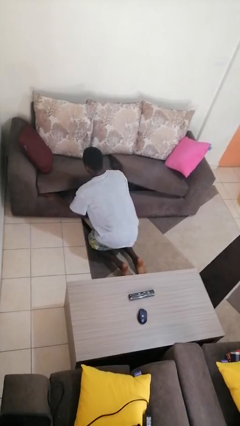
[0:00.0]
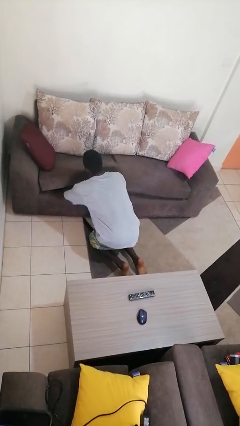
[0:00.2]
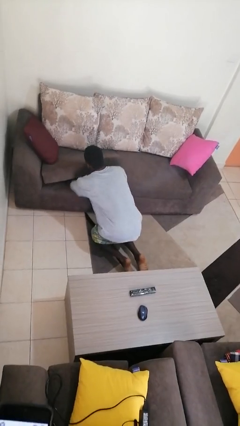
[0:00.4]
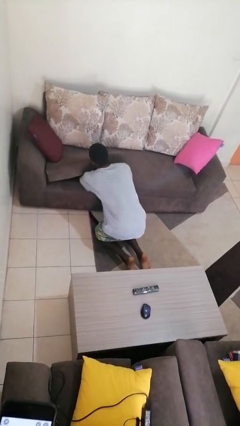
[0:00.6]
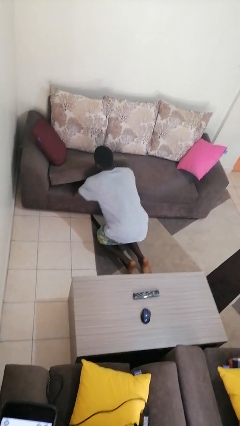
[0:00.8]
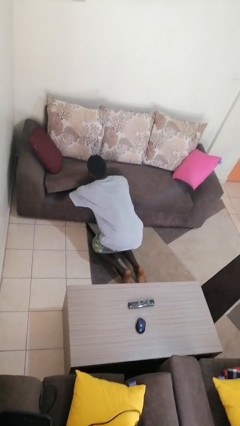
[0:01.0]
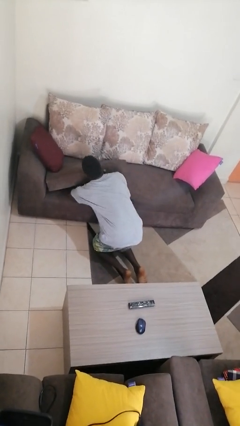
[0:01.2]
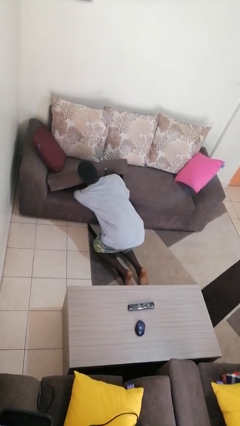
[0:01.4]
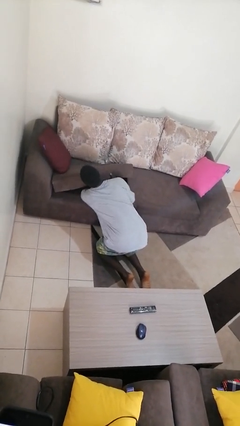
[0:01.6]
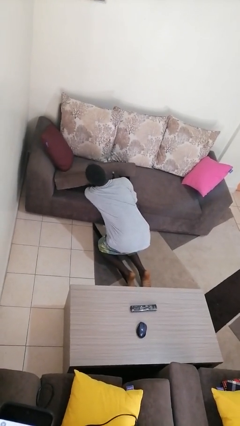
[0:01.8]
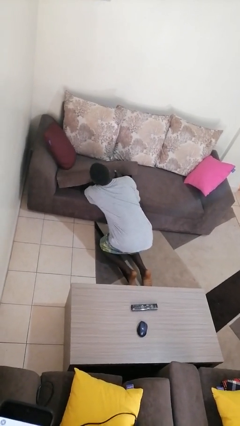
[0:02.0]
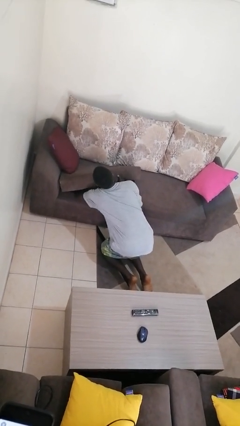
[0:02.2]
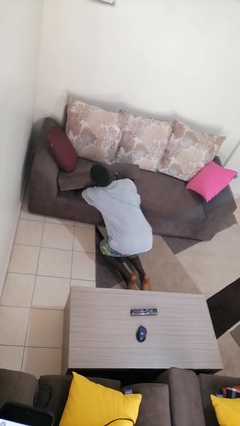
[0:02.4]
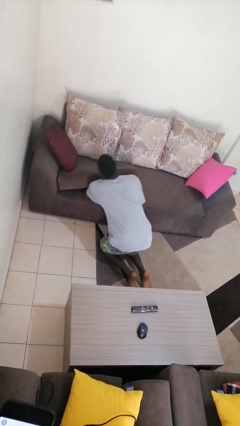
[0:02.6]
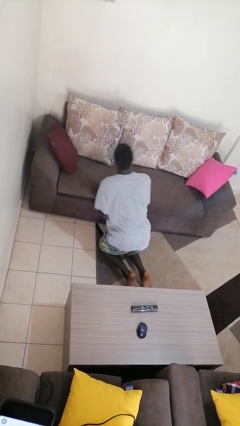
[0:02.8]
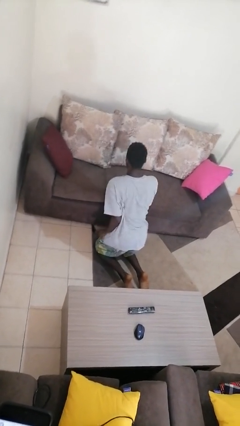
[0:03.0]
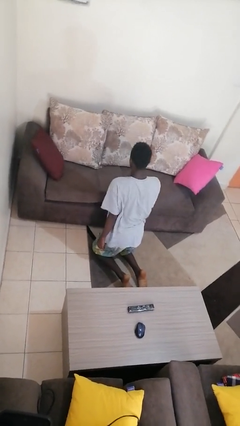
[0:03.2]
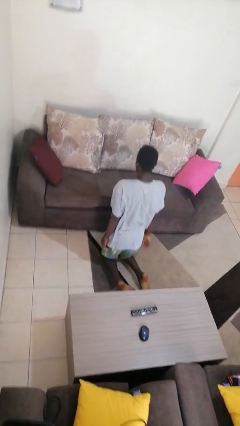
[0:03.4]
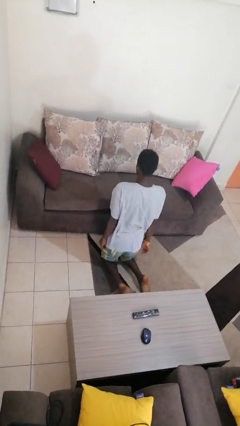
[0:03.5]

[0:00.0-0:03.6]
person searches under couch

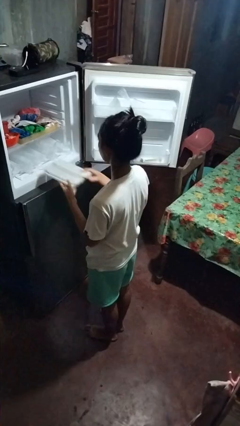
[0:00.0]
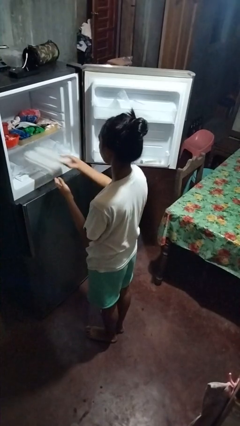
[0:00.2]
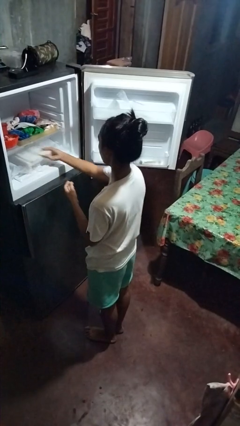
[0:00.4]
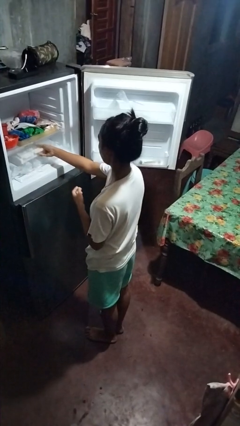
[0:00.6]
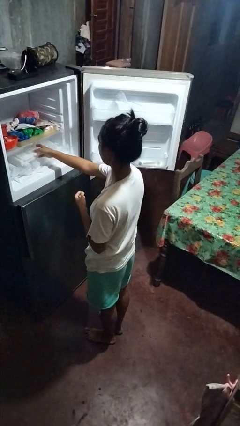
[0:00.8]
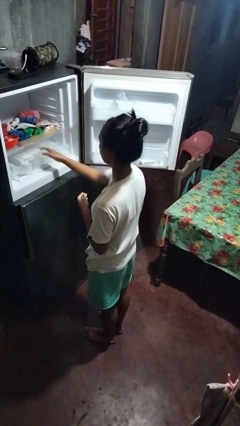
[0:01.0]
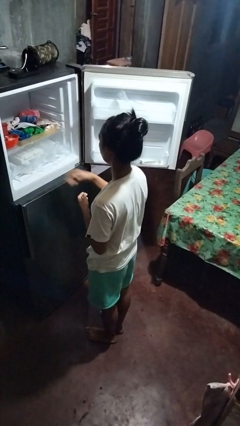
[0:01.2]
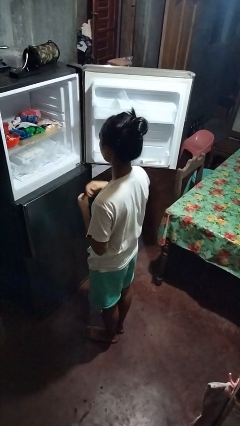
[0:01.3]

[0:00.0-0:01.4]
person puts object into refrigerator

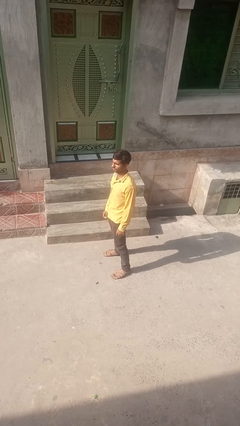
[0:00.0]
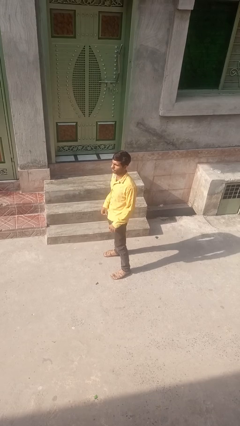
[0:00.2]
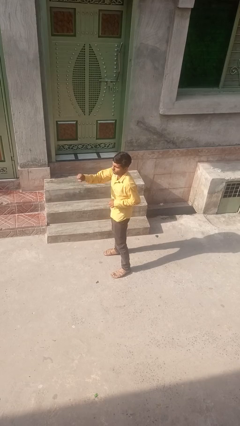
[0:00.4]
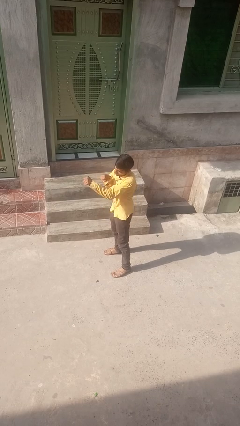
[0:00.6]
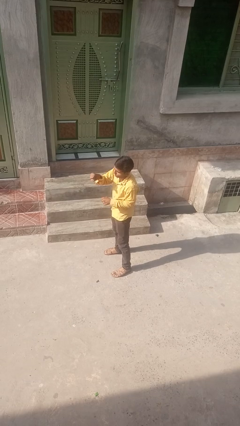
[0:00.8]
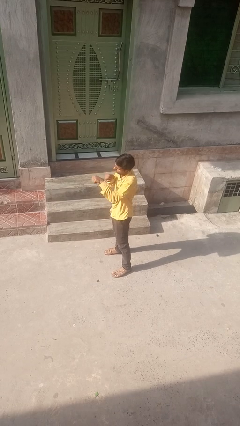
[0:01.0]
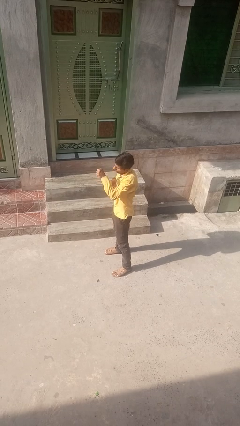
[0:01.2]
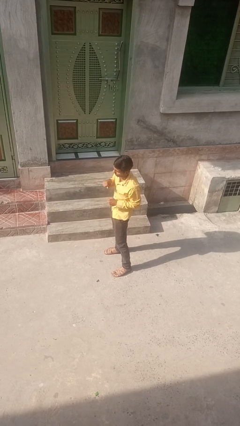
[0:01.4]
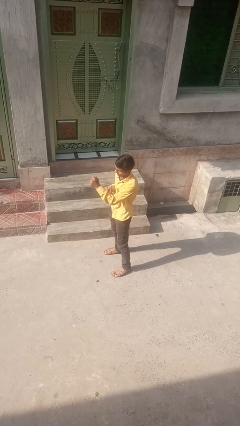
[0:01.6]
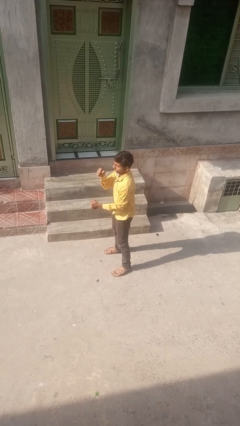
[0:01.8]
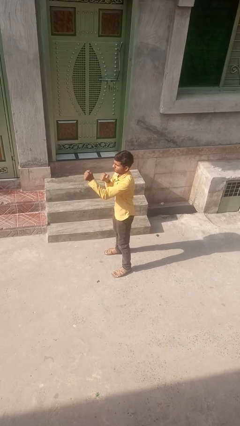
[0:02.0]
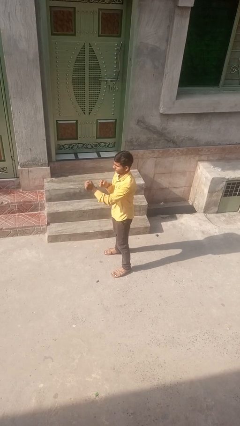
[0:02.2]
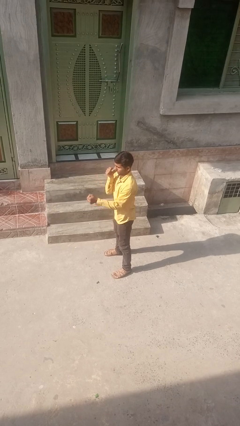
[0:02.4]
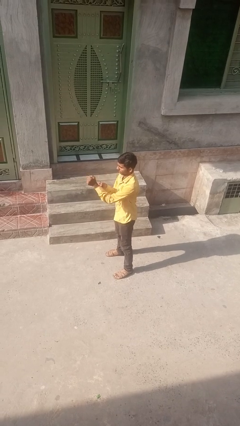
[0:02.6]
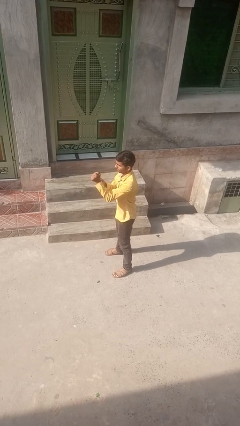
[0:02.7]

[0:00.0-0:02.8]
person punches

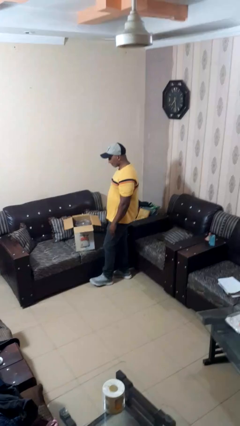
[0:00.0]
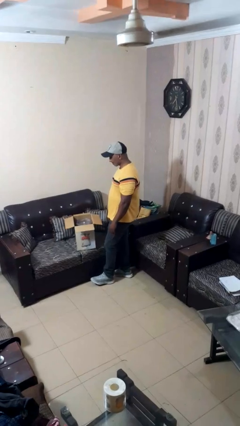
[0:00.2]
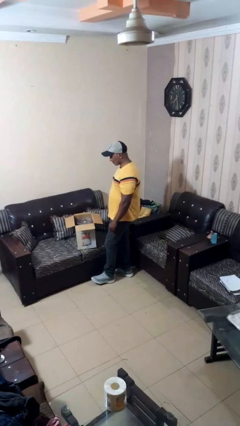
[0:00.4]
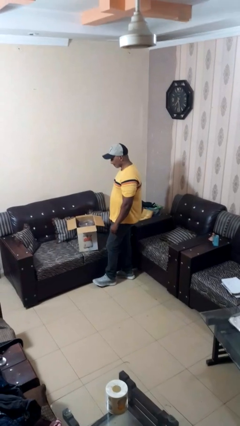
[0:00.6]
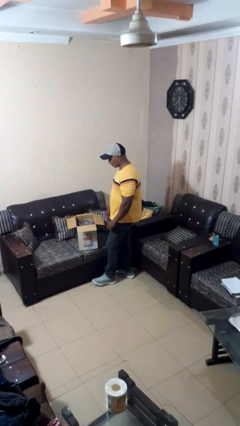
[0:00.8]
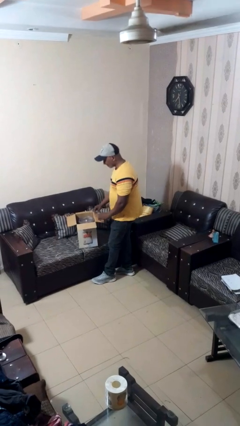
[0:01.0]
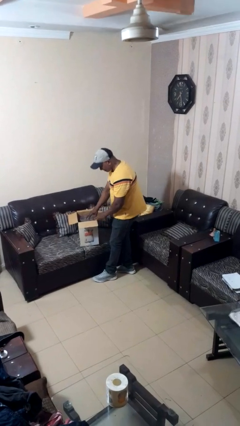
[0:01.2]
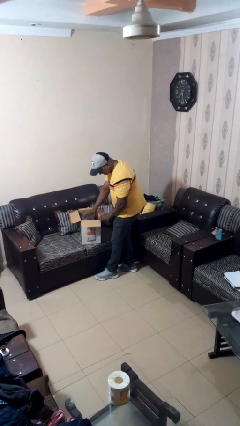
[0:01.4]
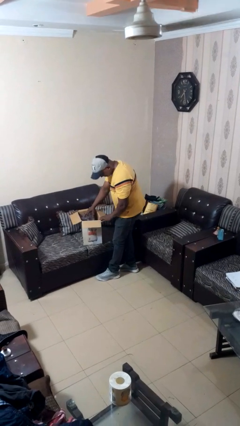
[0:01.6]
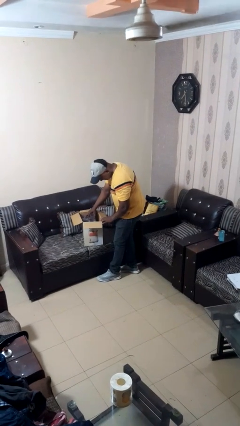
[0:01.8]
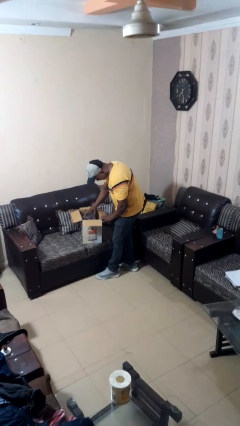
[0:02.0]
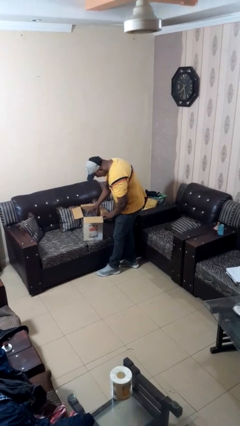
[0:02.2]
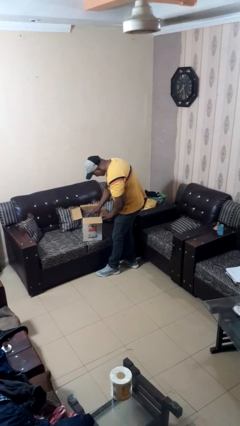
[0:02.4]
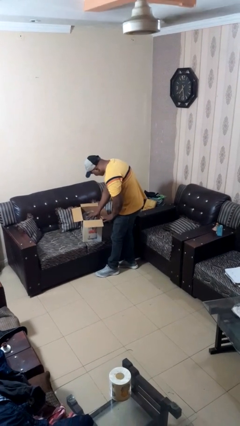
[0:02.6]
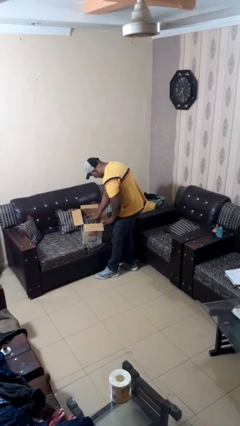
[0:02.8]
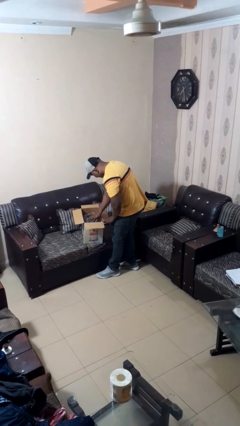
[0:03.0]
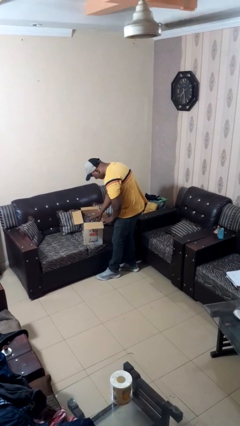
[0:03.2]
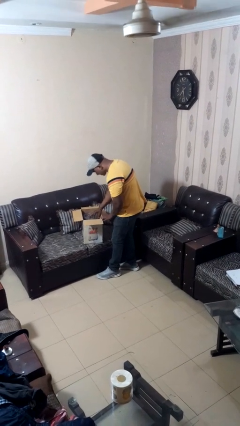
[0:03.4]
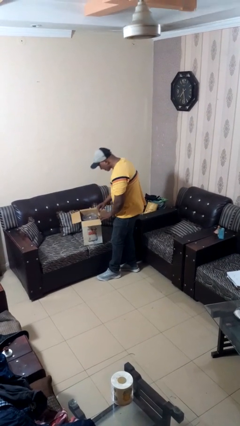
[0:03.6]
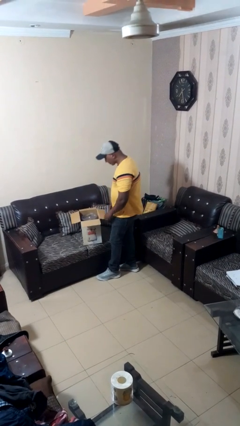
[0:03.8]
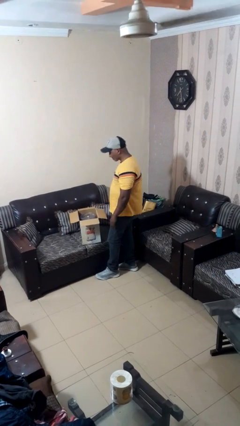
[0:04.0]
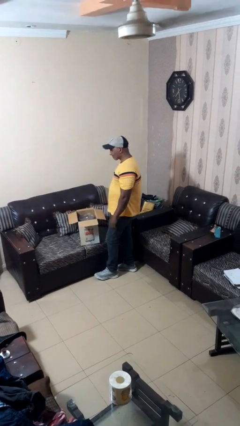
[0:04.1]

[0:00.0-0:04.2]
person searches in box

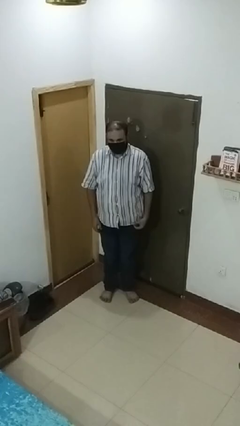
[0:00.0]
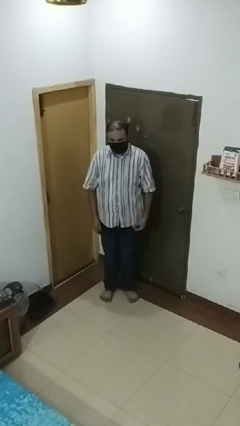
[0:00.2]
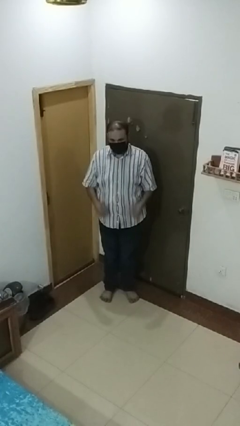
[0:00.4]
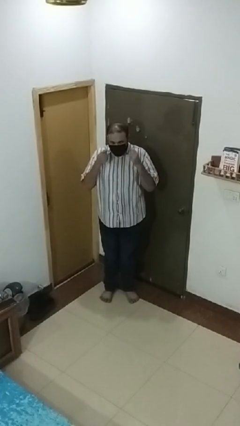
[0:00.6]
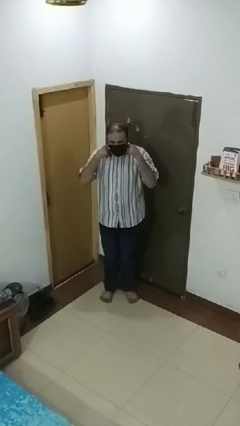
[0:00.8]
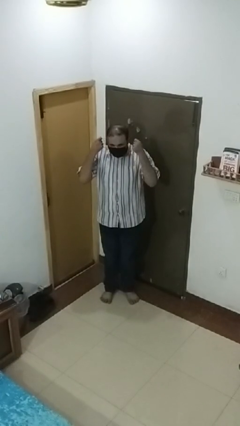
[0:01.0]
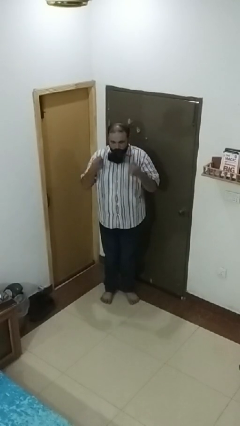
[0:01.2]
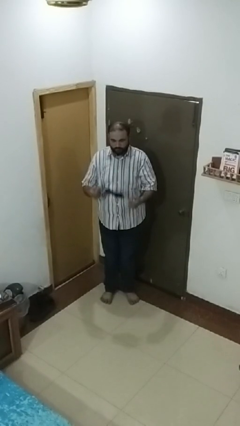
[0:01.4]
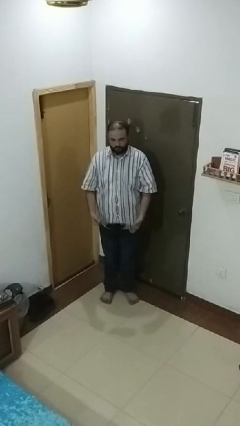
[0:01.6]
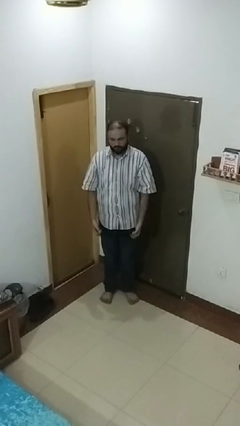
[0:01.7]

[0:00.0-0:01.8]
person takes off facemask

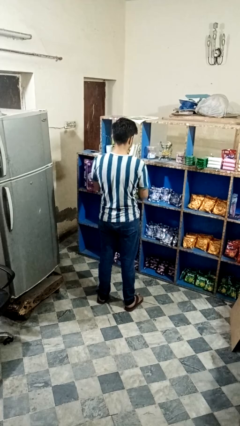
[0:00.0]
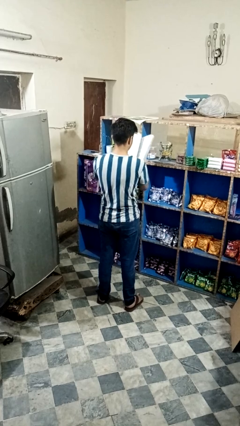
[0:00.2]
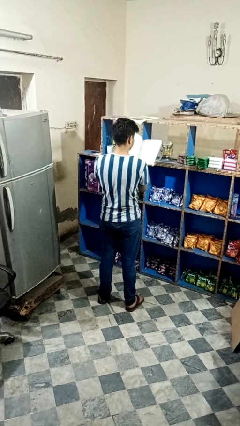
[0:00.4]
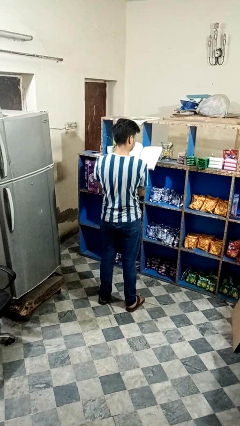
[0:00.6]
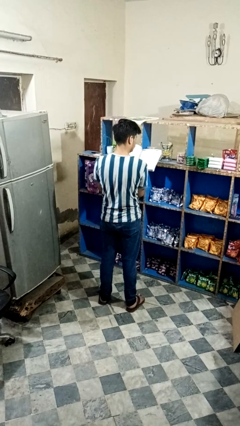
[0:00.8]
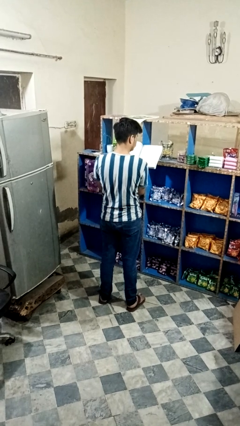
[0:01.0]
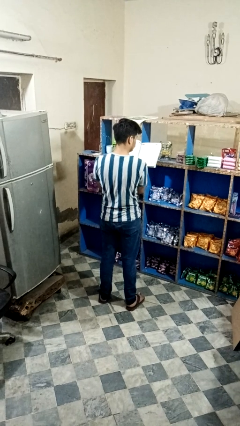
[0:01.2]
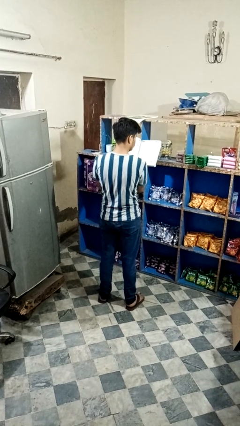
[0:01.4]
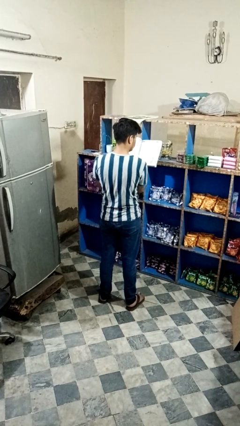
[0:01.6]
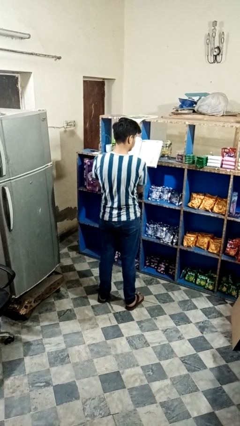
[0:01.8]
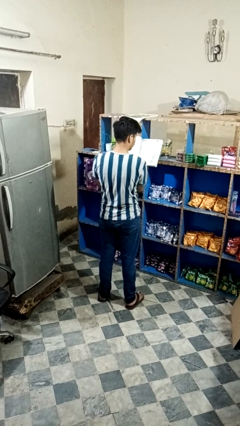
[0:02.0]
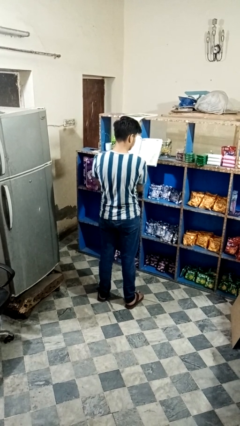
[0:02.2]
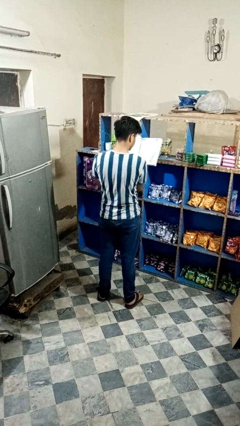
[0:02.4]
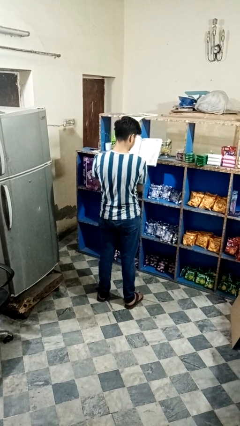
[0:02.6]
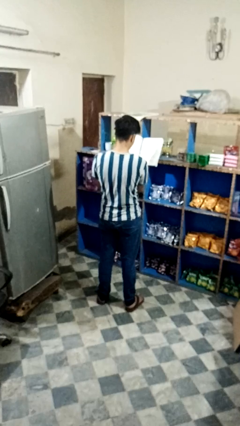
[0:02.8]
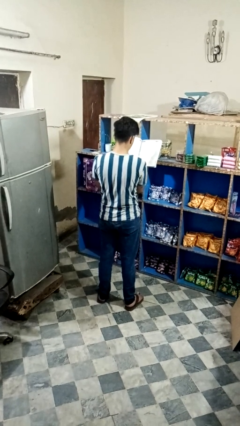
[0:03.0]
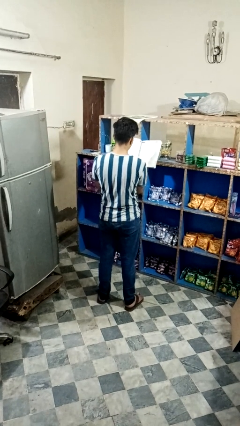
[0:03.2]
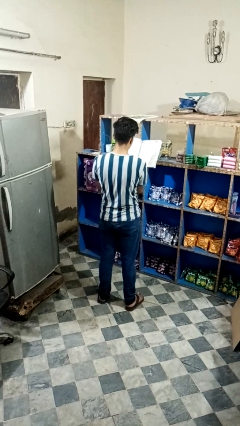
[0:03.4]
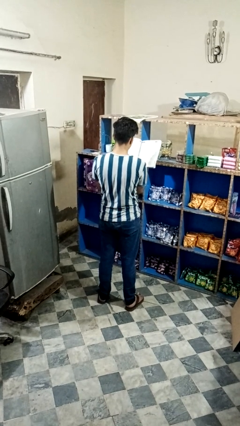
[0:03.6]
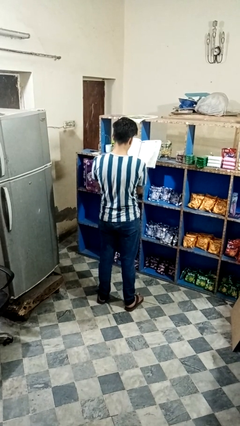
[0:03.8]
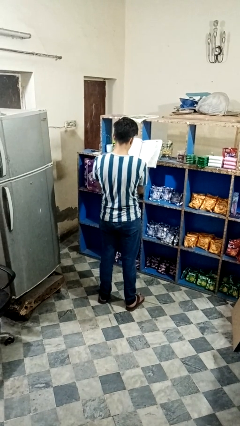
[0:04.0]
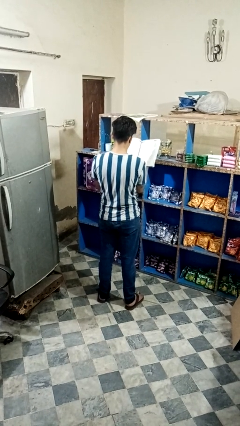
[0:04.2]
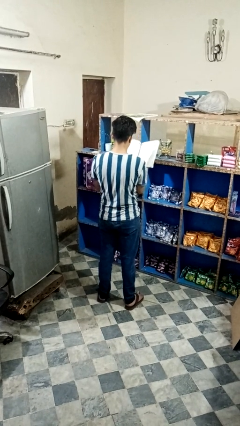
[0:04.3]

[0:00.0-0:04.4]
person reads book
